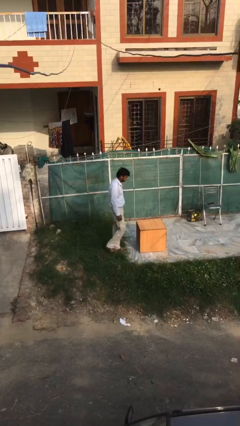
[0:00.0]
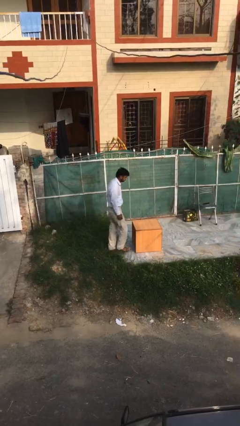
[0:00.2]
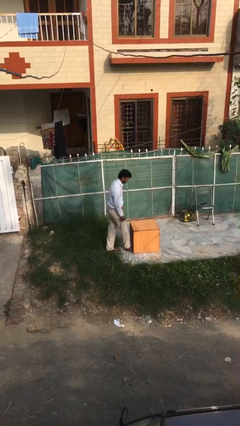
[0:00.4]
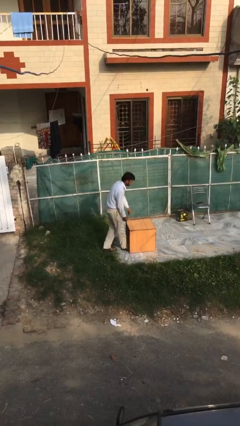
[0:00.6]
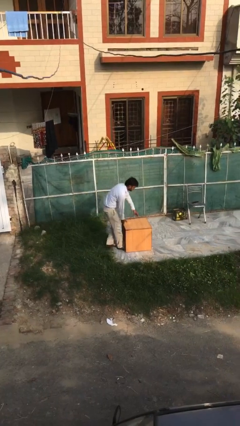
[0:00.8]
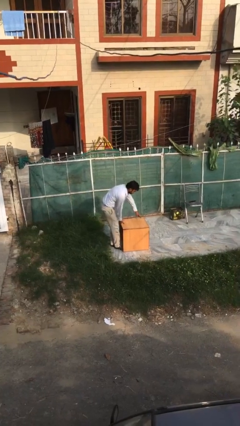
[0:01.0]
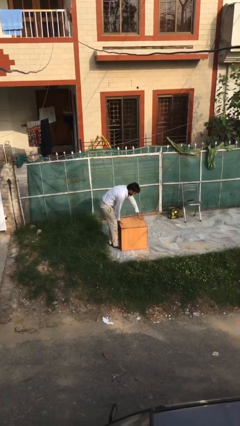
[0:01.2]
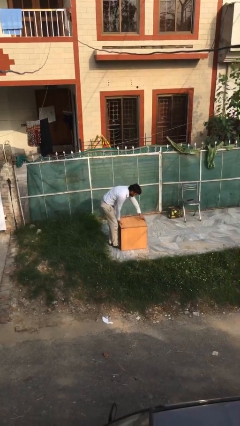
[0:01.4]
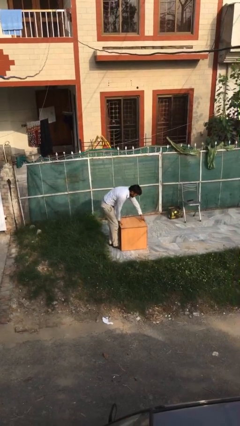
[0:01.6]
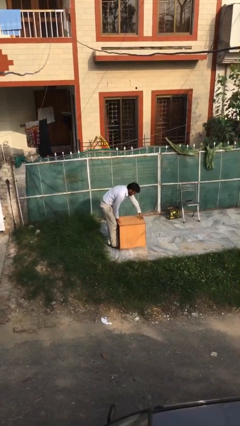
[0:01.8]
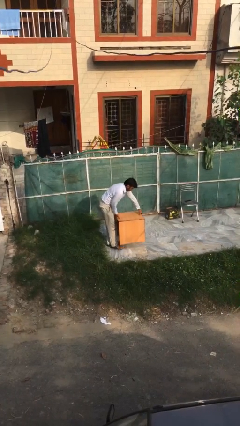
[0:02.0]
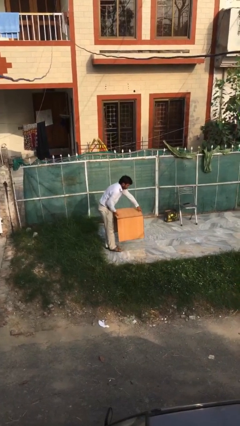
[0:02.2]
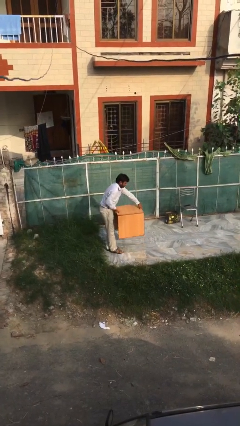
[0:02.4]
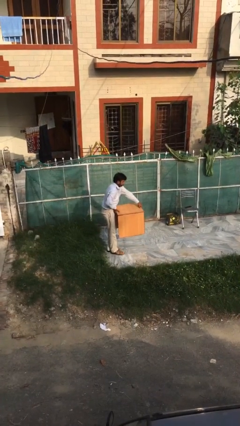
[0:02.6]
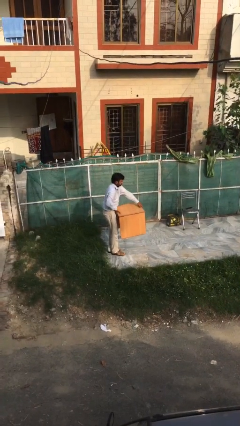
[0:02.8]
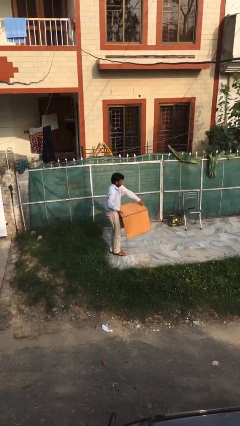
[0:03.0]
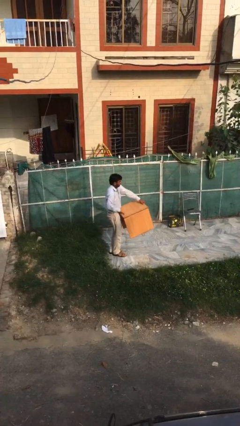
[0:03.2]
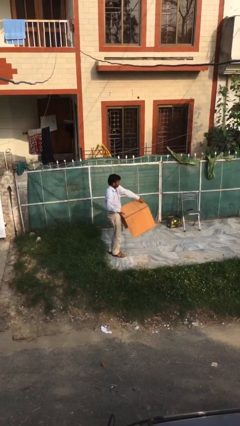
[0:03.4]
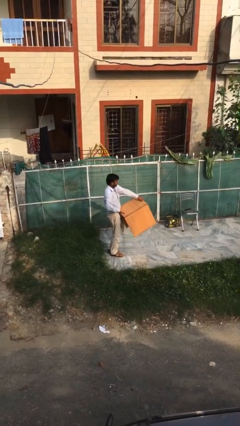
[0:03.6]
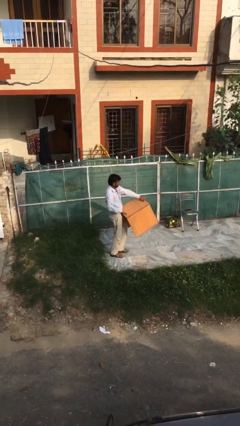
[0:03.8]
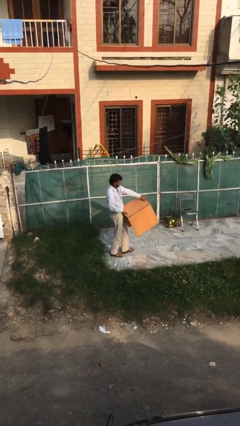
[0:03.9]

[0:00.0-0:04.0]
person picks up object from floor

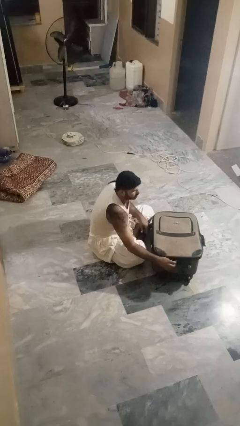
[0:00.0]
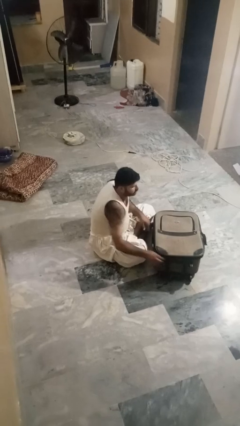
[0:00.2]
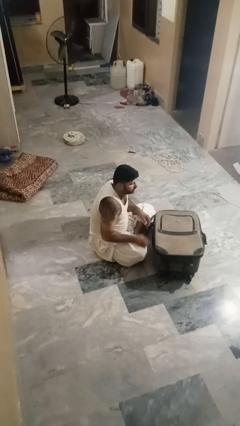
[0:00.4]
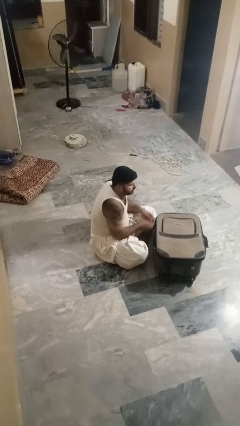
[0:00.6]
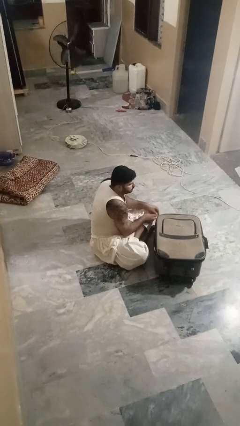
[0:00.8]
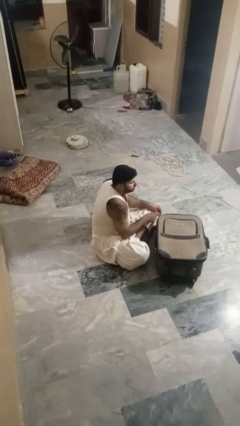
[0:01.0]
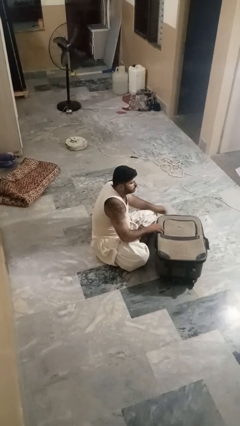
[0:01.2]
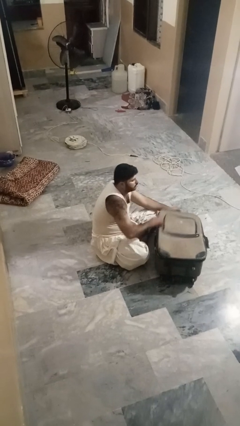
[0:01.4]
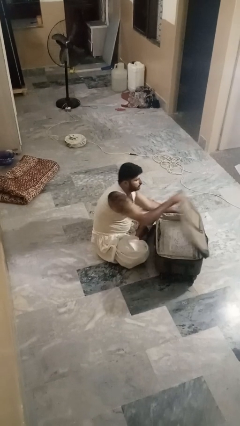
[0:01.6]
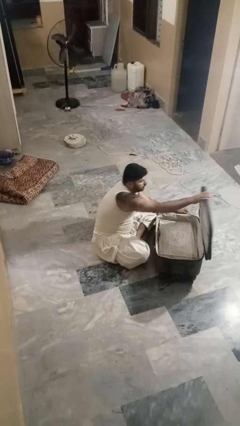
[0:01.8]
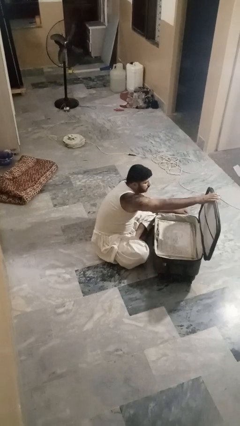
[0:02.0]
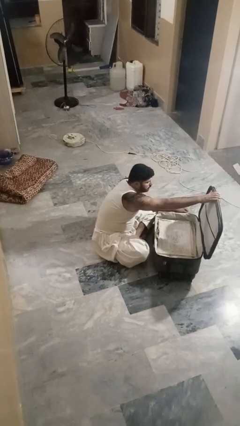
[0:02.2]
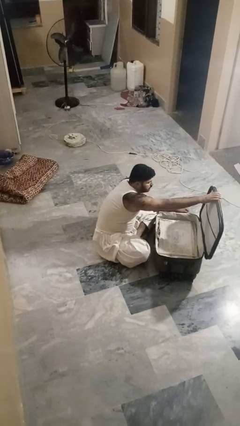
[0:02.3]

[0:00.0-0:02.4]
person opens suitcase

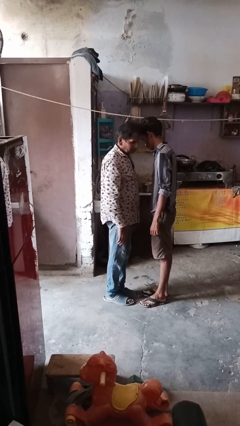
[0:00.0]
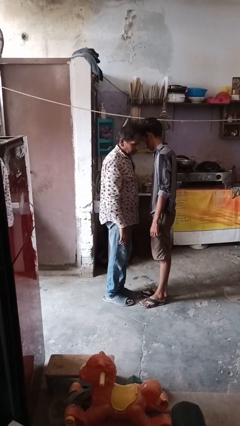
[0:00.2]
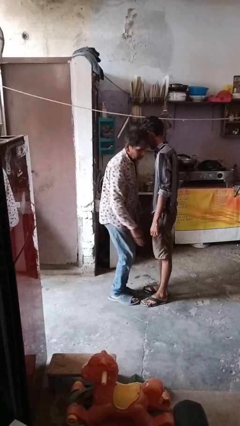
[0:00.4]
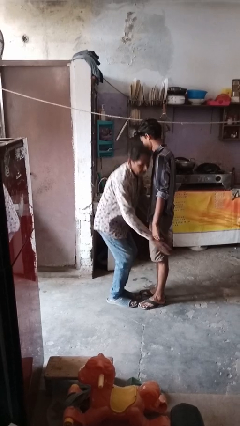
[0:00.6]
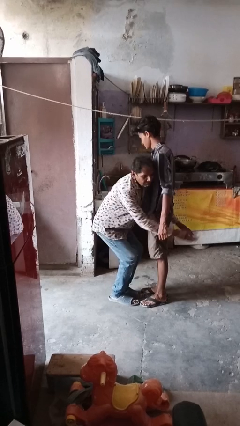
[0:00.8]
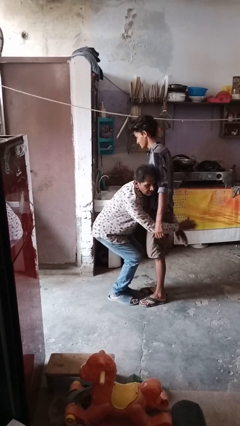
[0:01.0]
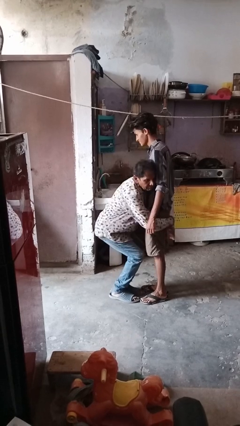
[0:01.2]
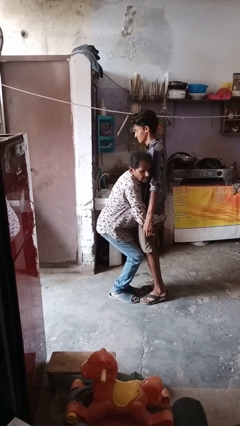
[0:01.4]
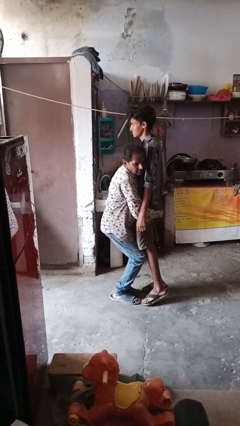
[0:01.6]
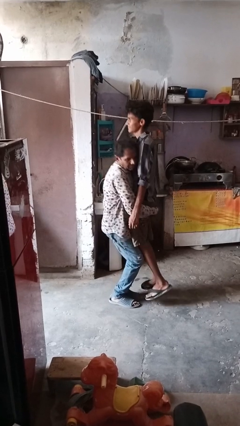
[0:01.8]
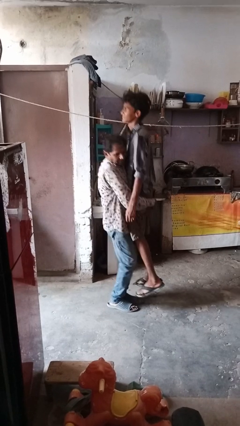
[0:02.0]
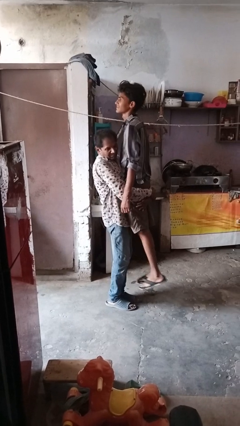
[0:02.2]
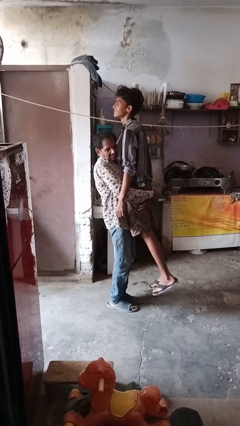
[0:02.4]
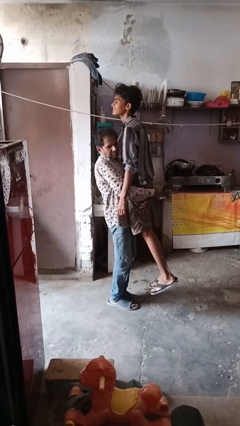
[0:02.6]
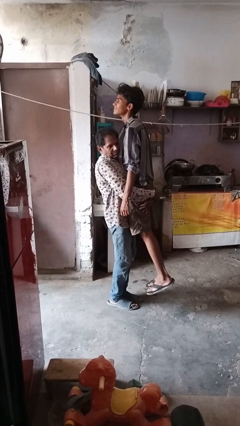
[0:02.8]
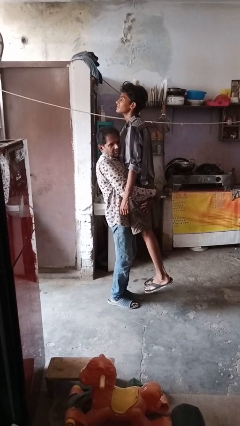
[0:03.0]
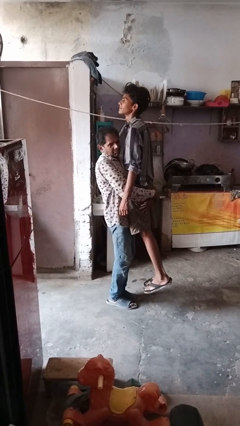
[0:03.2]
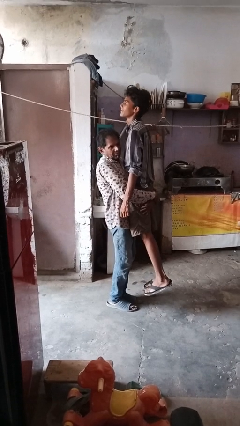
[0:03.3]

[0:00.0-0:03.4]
person picks up person

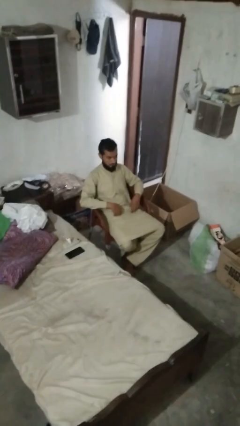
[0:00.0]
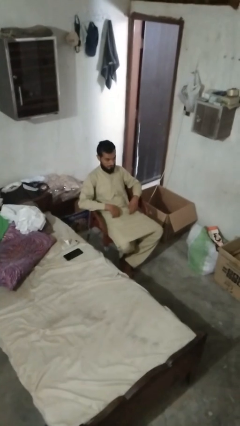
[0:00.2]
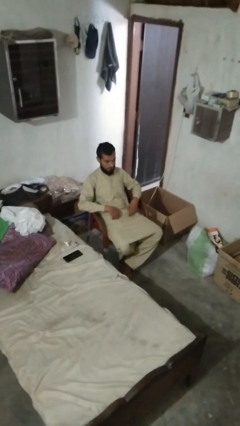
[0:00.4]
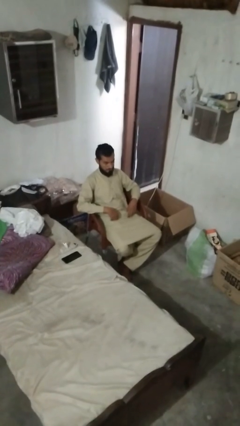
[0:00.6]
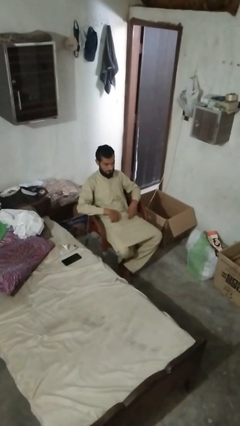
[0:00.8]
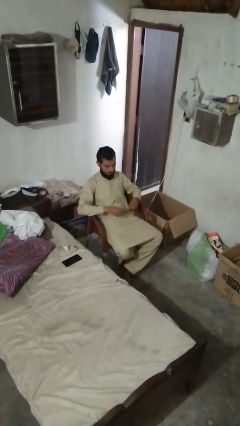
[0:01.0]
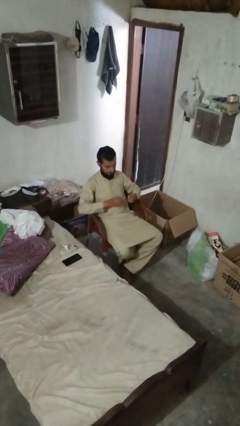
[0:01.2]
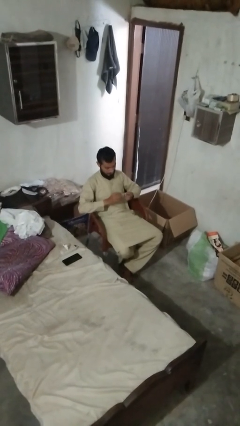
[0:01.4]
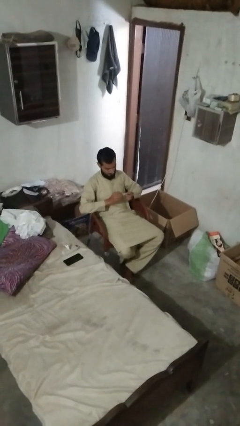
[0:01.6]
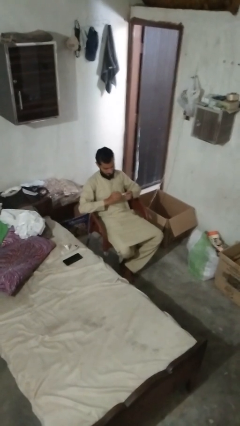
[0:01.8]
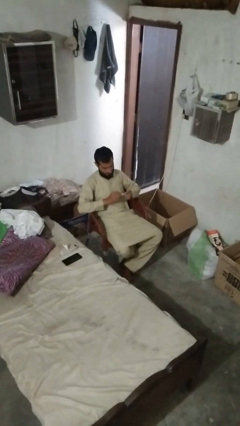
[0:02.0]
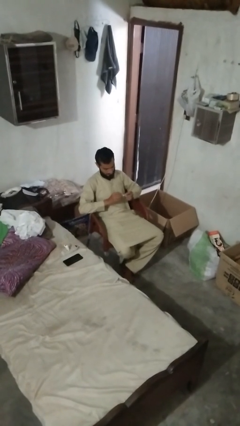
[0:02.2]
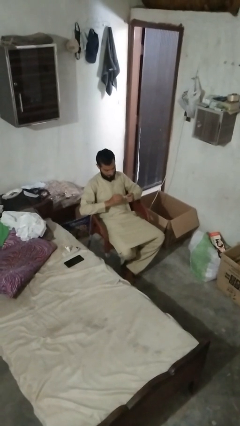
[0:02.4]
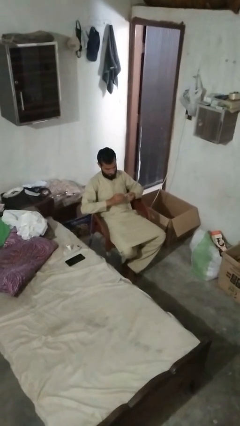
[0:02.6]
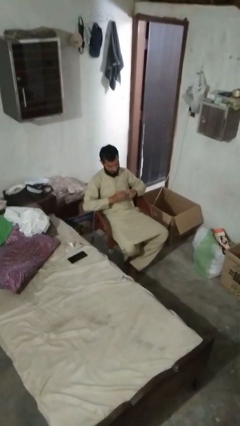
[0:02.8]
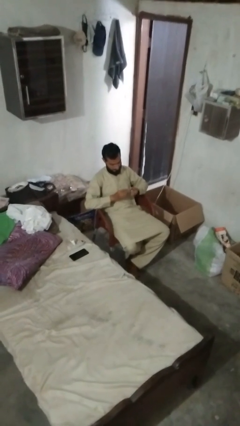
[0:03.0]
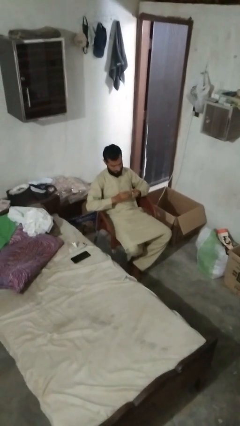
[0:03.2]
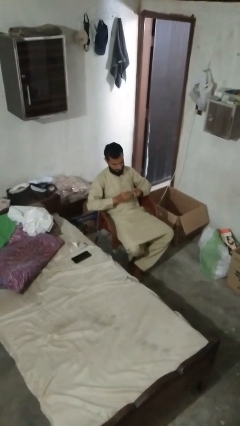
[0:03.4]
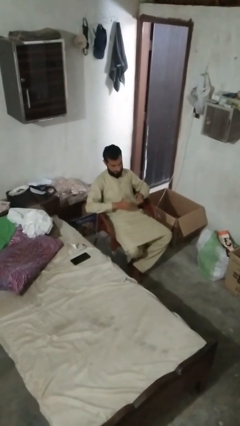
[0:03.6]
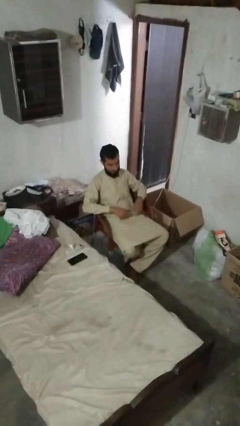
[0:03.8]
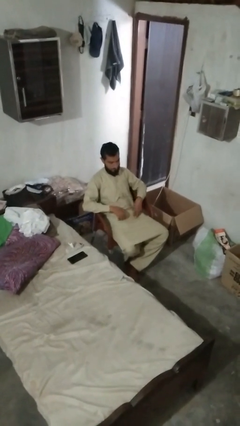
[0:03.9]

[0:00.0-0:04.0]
person clips fingernails

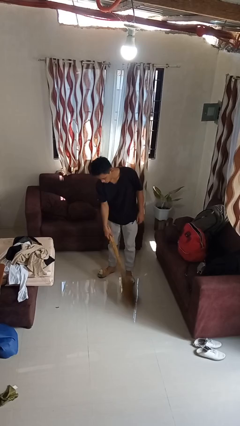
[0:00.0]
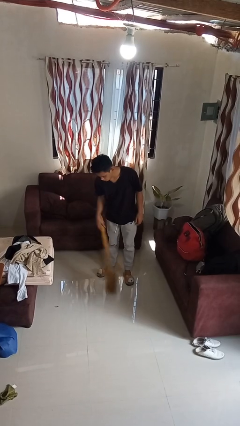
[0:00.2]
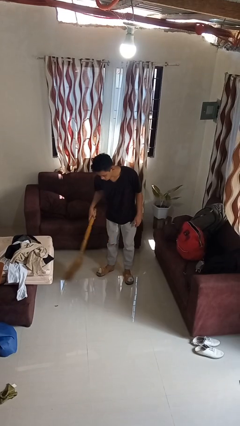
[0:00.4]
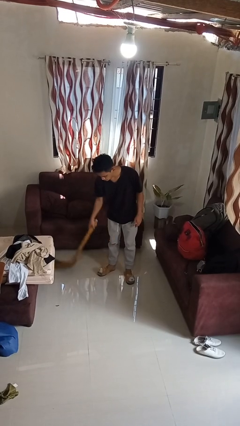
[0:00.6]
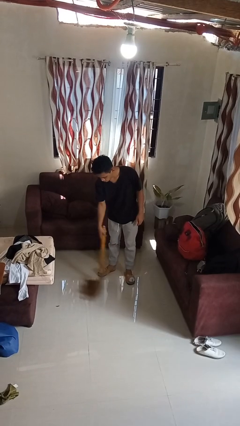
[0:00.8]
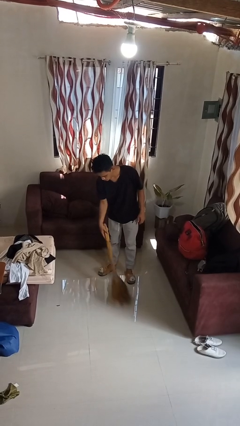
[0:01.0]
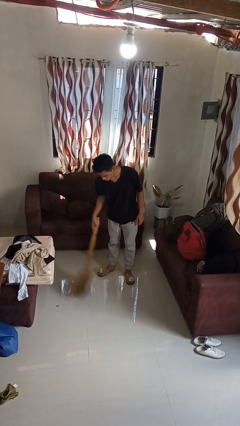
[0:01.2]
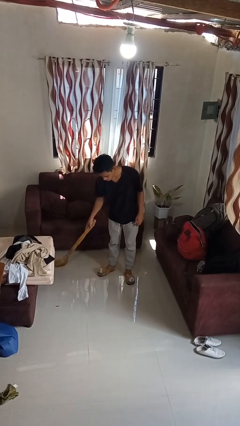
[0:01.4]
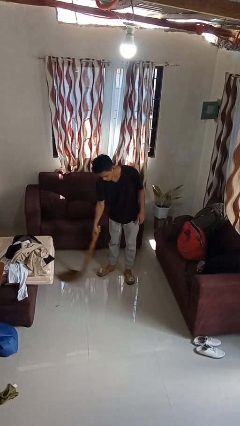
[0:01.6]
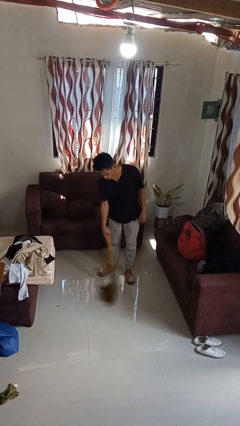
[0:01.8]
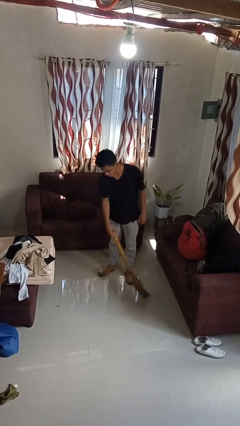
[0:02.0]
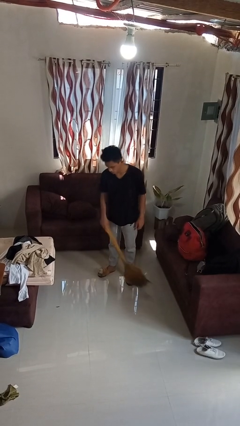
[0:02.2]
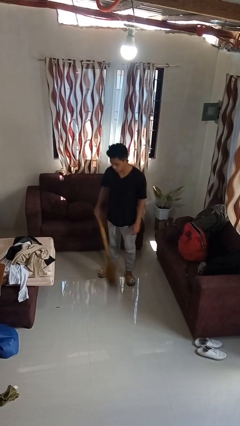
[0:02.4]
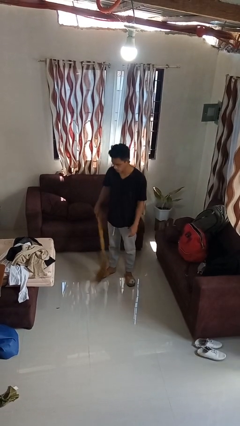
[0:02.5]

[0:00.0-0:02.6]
person sweeps floor

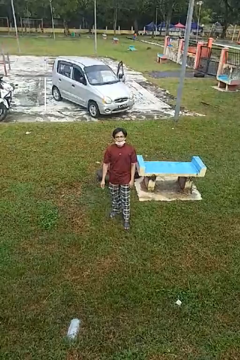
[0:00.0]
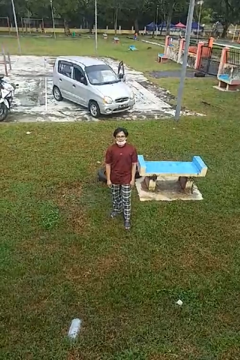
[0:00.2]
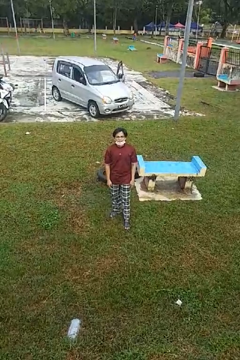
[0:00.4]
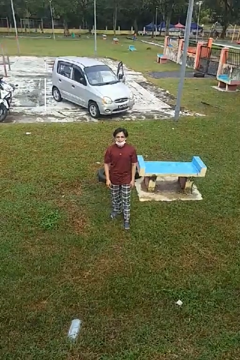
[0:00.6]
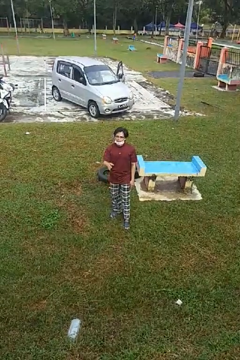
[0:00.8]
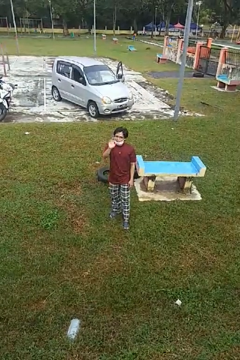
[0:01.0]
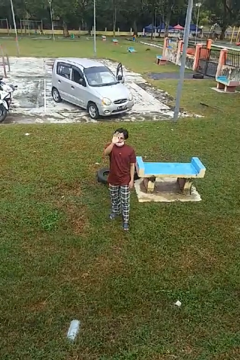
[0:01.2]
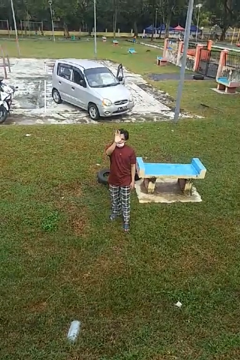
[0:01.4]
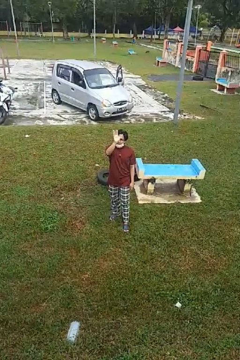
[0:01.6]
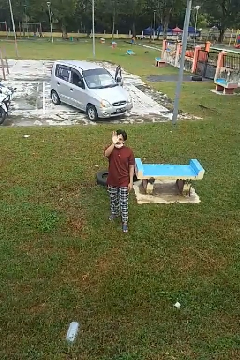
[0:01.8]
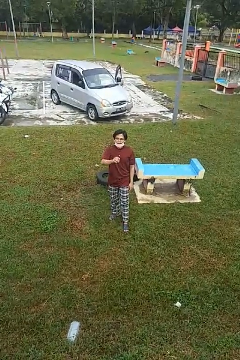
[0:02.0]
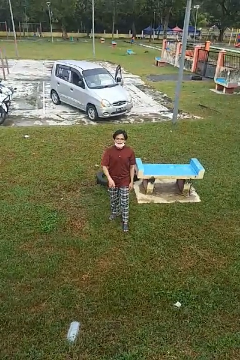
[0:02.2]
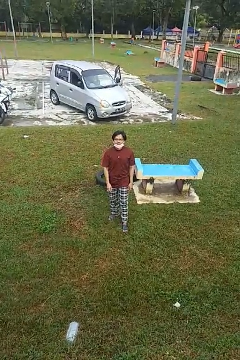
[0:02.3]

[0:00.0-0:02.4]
person waves at person
